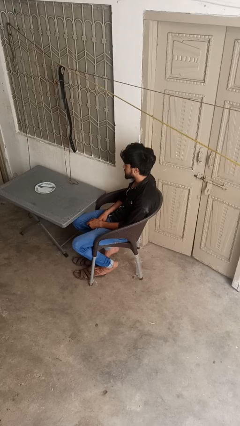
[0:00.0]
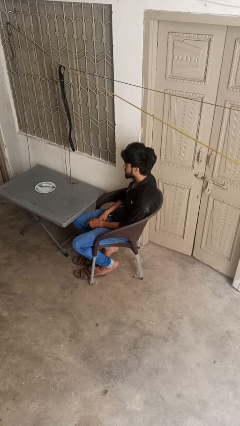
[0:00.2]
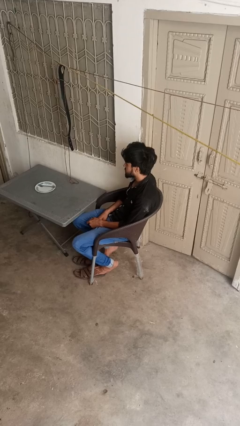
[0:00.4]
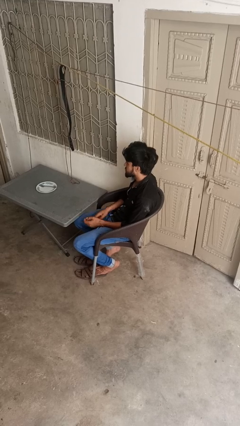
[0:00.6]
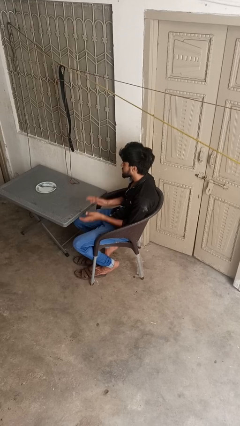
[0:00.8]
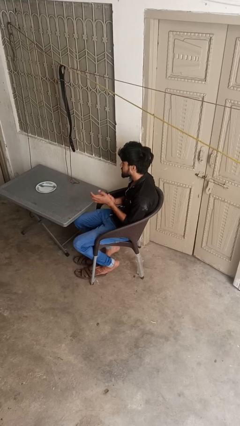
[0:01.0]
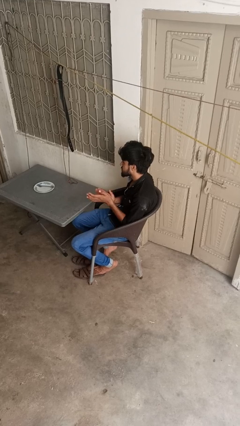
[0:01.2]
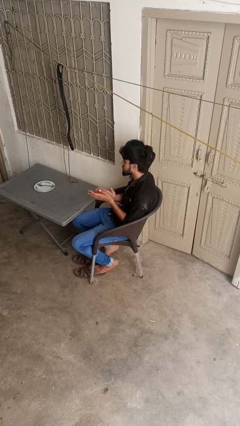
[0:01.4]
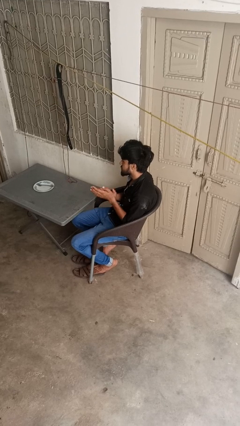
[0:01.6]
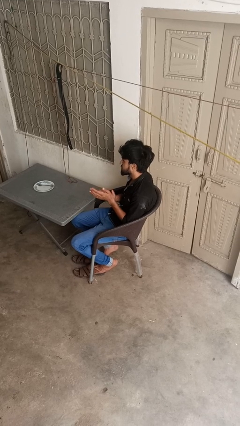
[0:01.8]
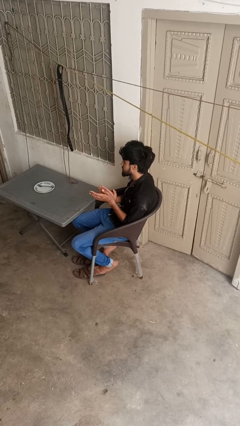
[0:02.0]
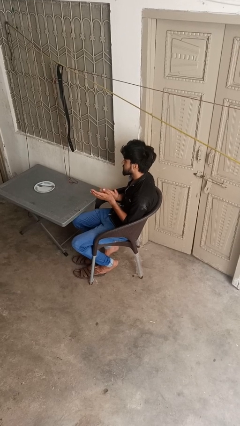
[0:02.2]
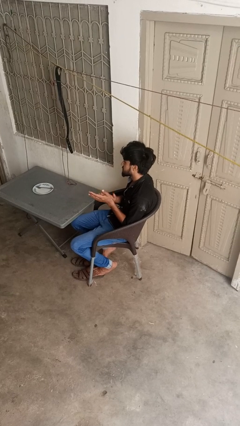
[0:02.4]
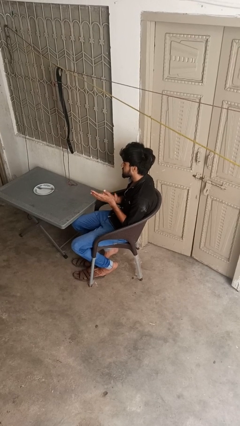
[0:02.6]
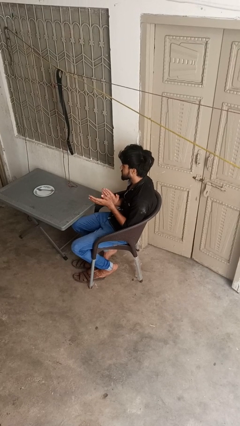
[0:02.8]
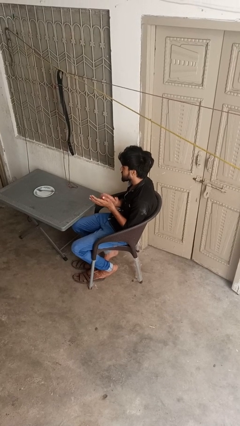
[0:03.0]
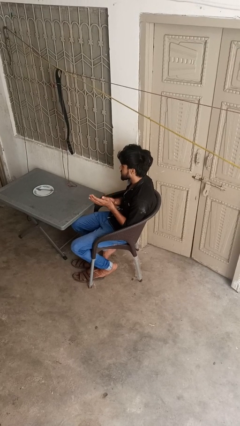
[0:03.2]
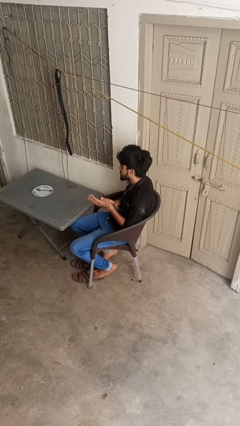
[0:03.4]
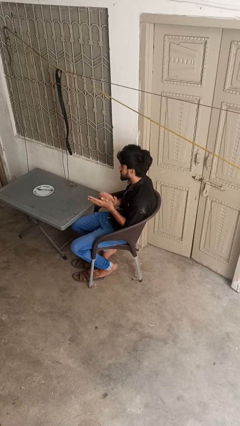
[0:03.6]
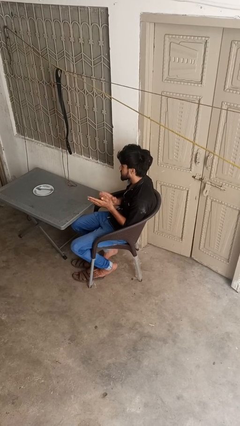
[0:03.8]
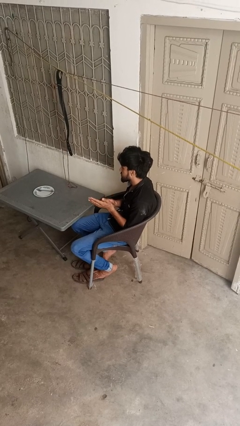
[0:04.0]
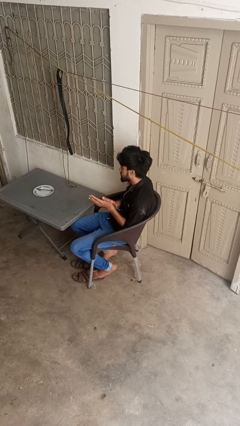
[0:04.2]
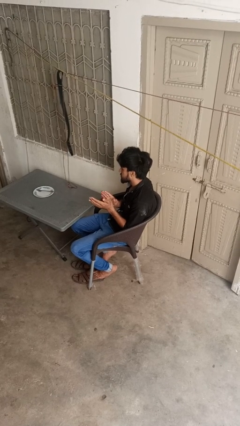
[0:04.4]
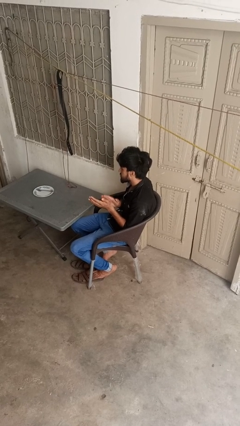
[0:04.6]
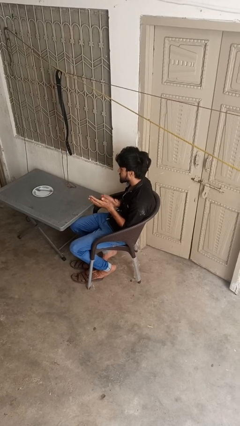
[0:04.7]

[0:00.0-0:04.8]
person claps hands

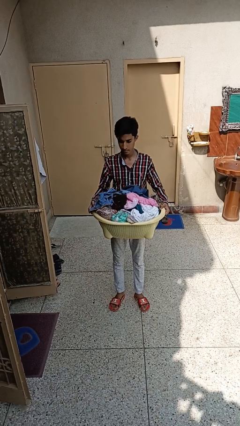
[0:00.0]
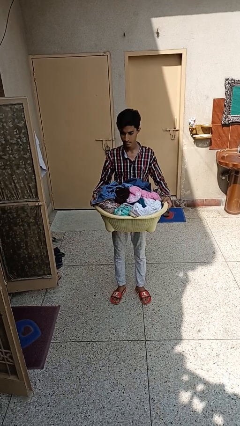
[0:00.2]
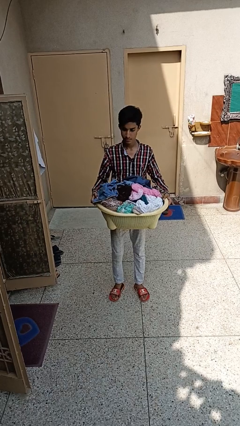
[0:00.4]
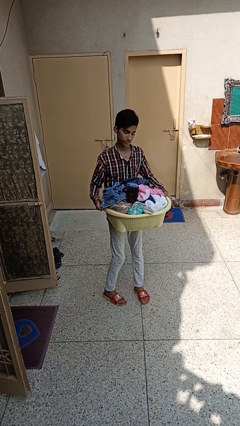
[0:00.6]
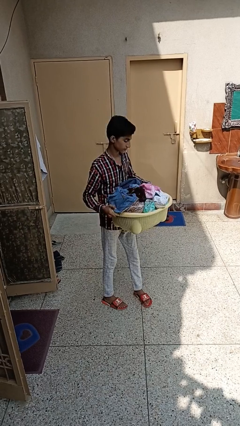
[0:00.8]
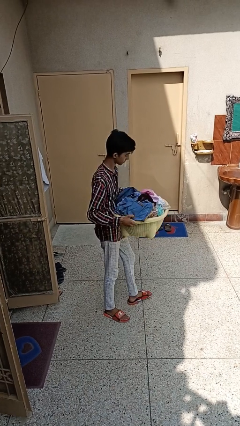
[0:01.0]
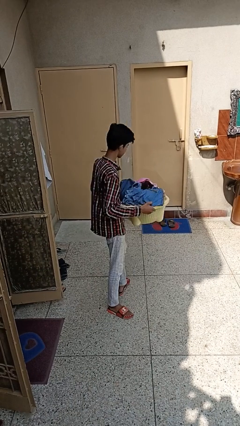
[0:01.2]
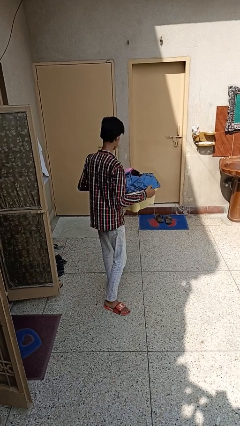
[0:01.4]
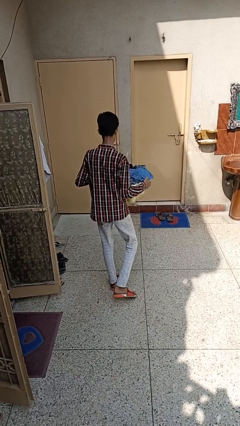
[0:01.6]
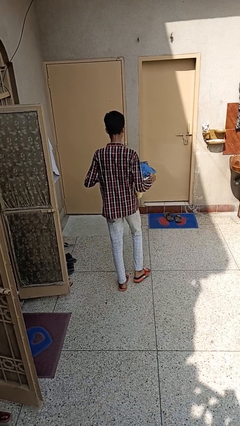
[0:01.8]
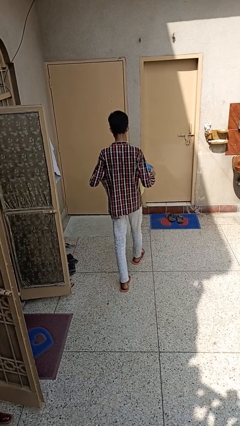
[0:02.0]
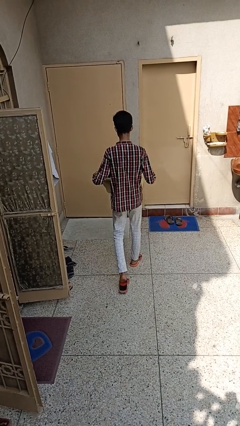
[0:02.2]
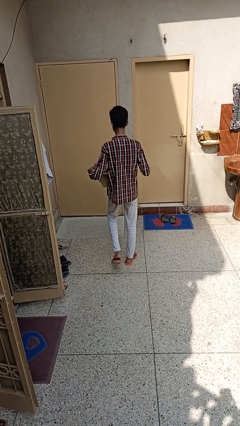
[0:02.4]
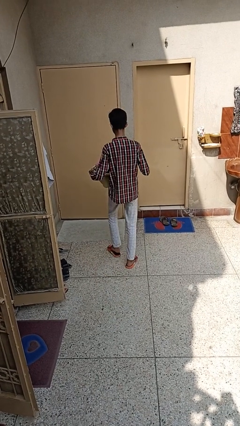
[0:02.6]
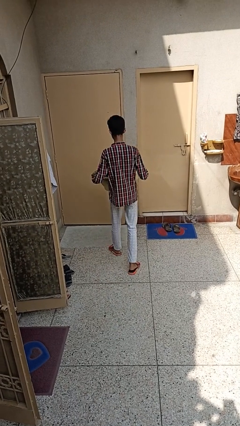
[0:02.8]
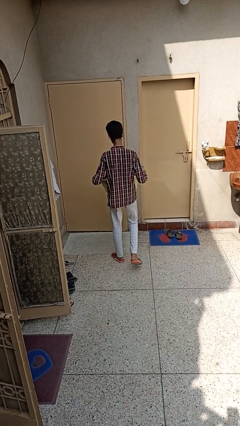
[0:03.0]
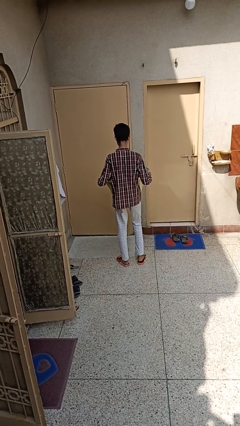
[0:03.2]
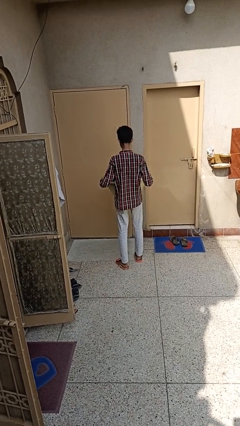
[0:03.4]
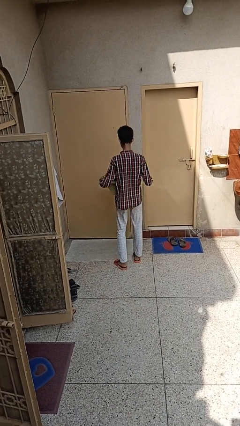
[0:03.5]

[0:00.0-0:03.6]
person carries laundry basket

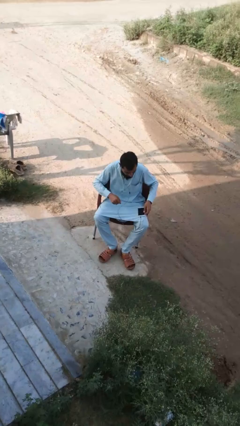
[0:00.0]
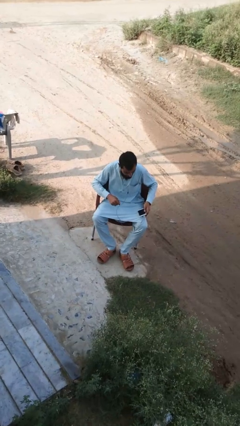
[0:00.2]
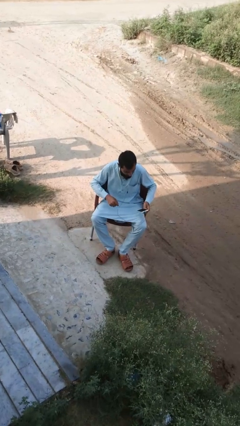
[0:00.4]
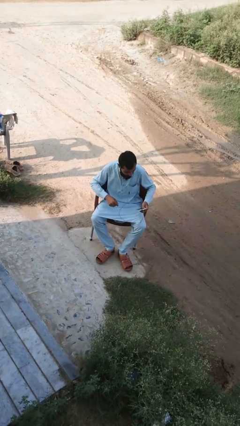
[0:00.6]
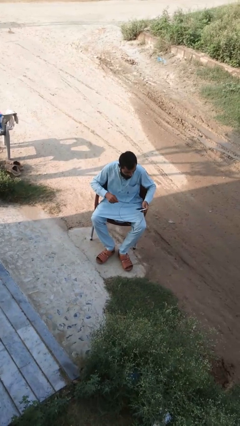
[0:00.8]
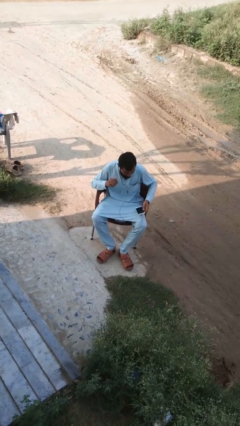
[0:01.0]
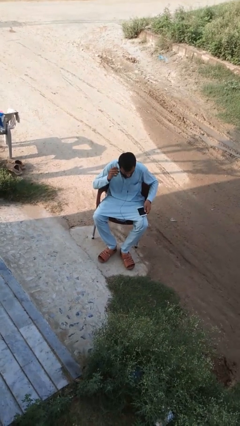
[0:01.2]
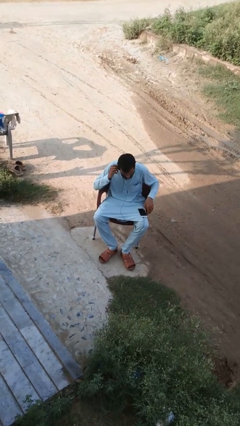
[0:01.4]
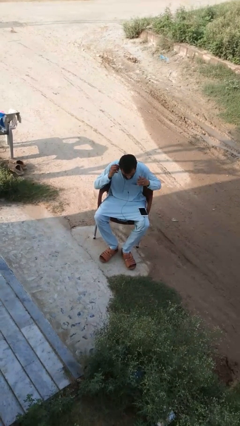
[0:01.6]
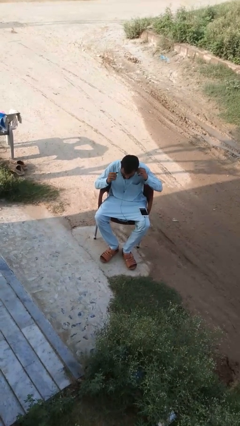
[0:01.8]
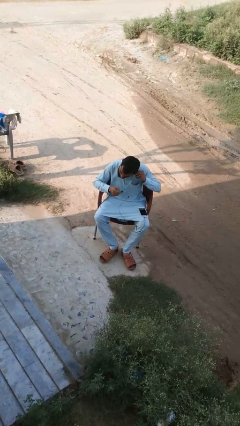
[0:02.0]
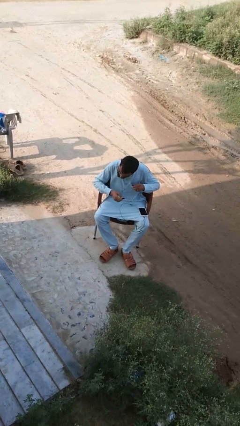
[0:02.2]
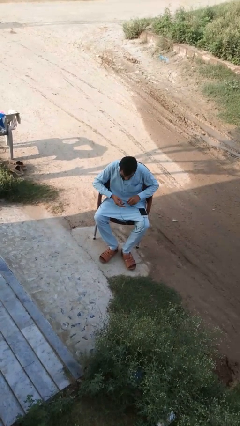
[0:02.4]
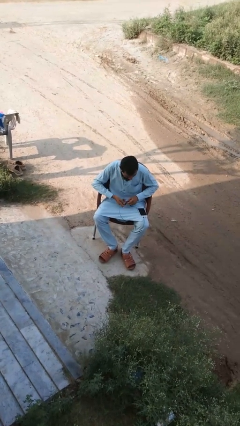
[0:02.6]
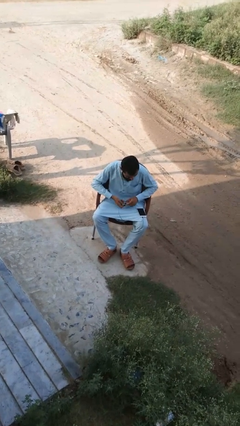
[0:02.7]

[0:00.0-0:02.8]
person takes off headphones

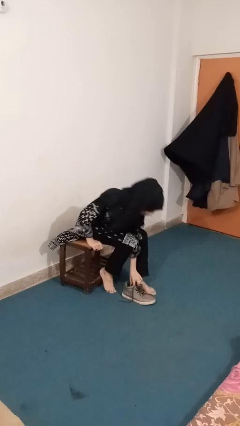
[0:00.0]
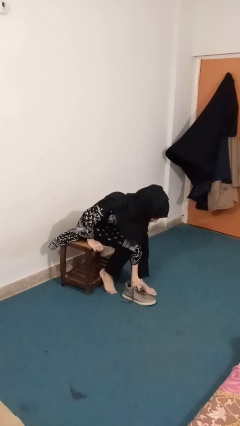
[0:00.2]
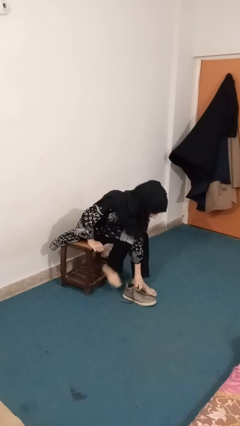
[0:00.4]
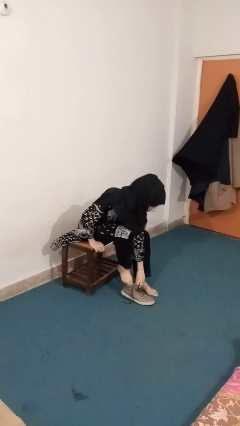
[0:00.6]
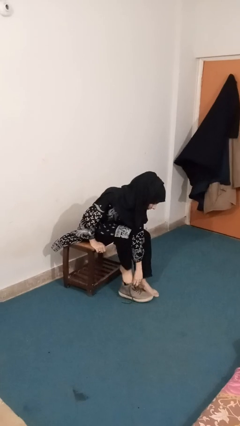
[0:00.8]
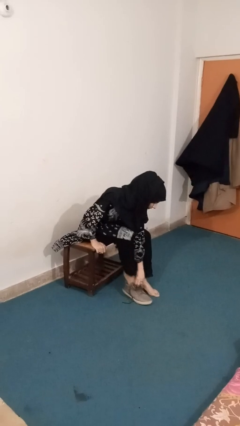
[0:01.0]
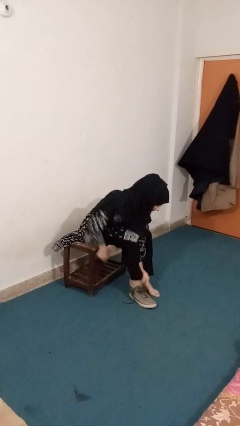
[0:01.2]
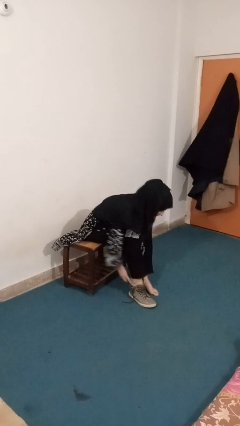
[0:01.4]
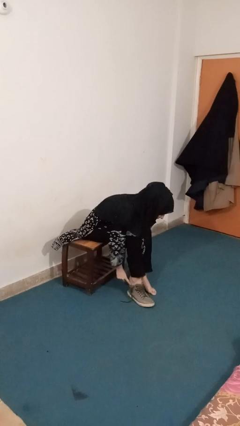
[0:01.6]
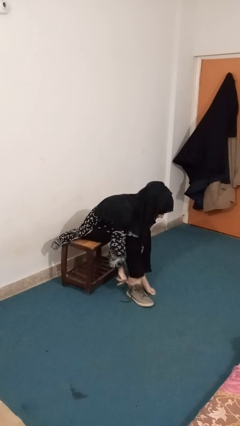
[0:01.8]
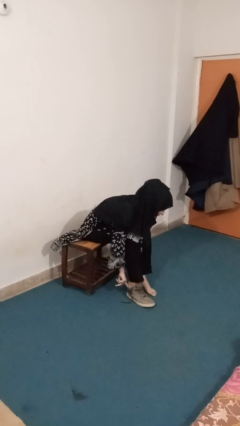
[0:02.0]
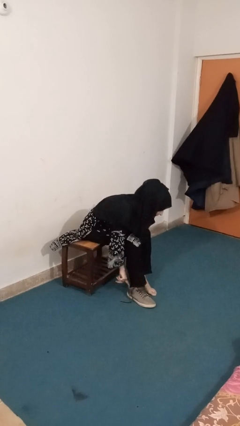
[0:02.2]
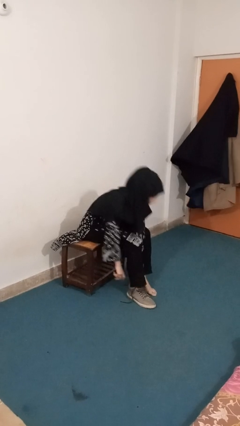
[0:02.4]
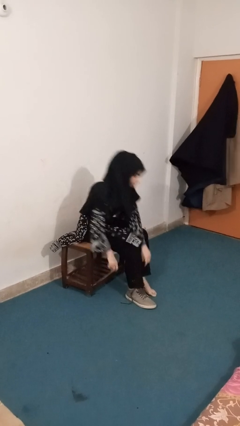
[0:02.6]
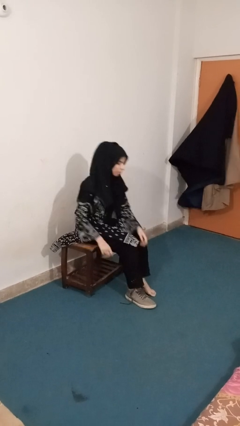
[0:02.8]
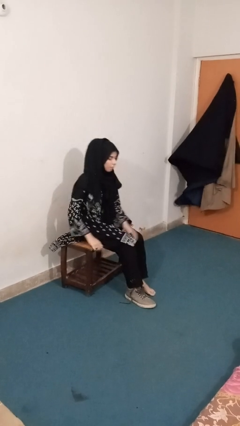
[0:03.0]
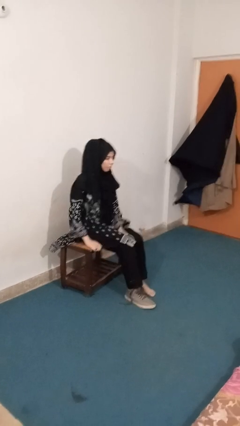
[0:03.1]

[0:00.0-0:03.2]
person puts on boots

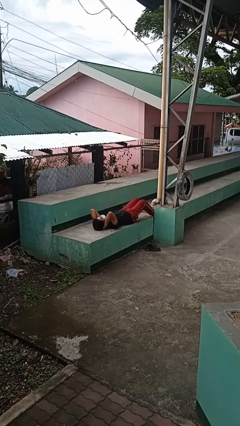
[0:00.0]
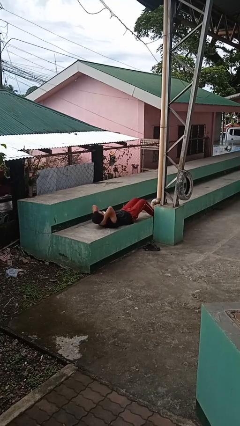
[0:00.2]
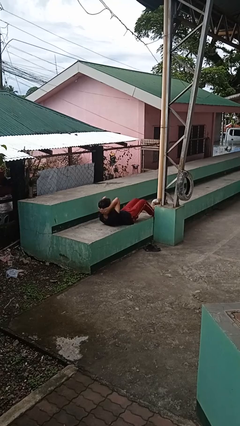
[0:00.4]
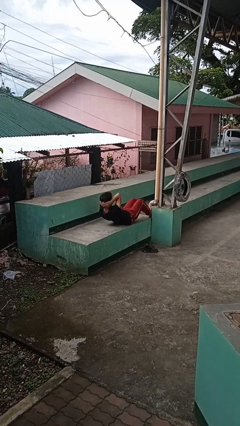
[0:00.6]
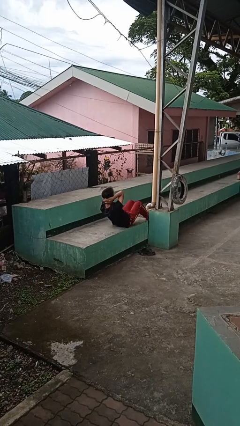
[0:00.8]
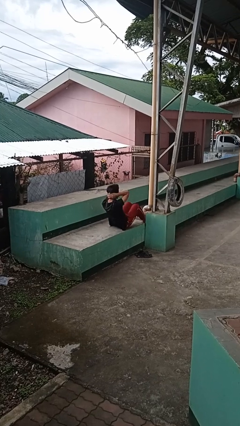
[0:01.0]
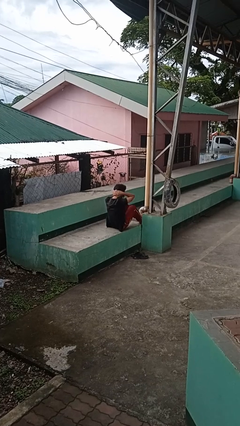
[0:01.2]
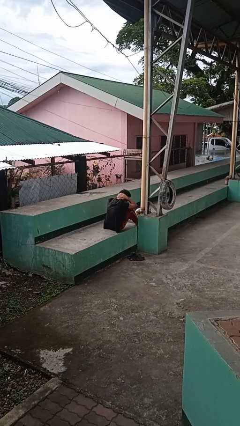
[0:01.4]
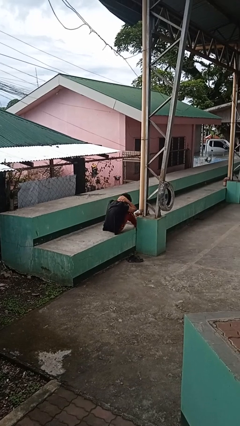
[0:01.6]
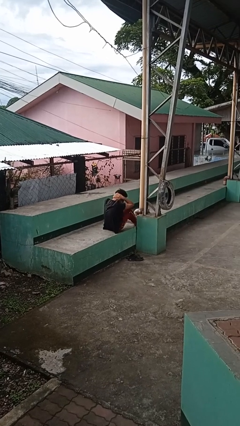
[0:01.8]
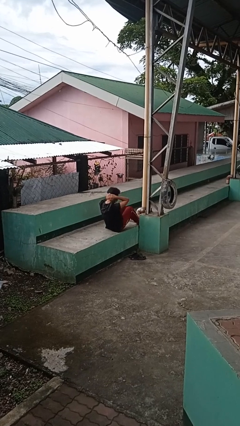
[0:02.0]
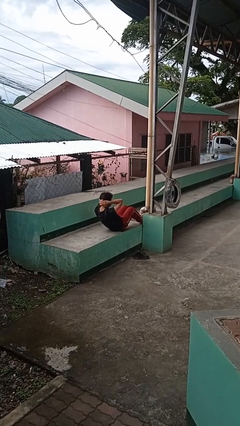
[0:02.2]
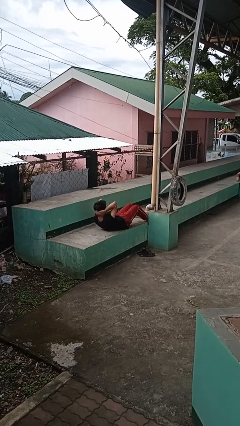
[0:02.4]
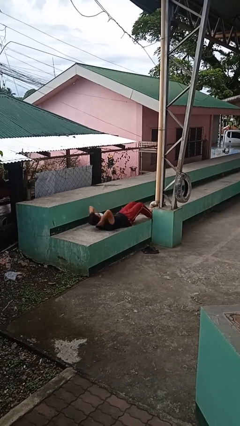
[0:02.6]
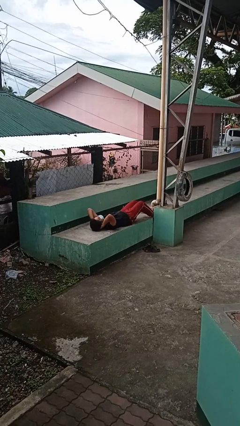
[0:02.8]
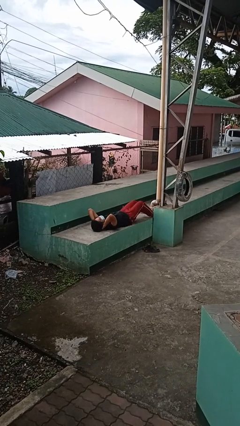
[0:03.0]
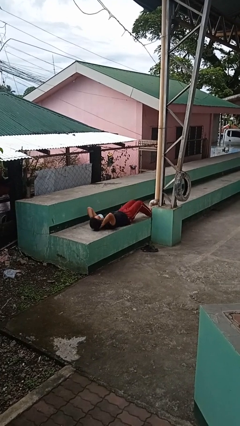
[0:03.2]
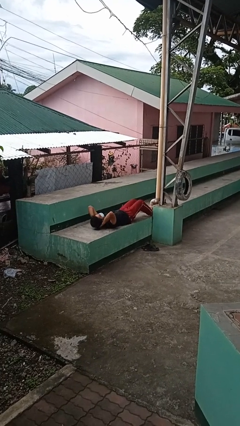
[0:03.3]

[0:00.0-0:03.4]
person exercises with situp
